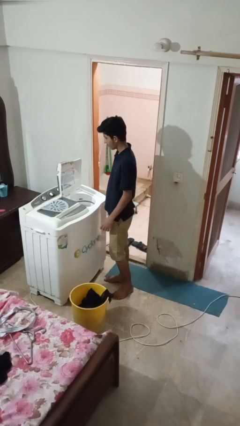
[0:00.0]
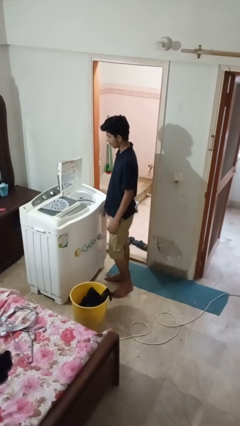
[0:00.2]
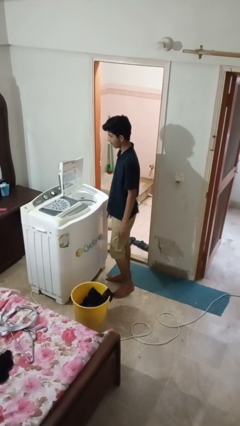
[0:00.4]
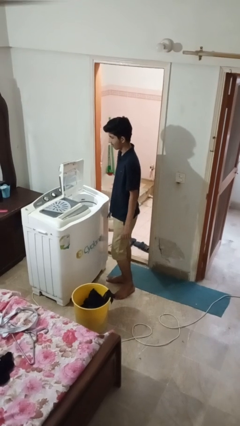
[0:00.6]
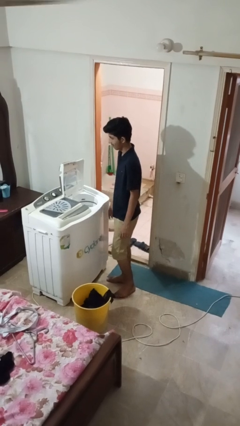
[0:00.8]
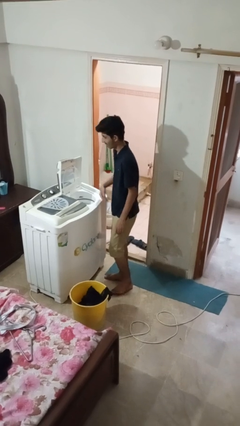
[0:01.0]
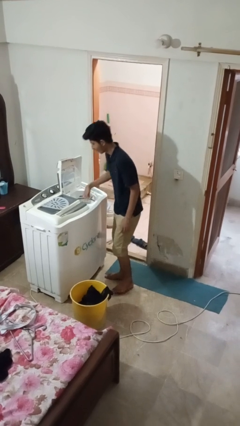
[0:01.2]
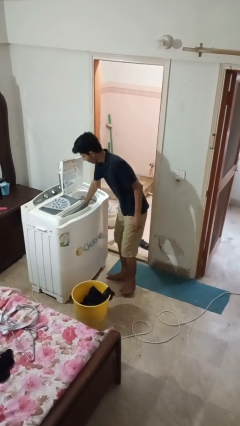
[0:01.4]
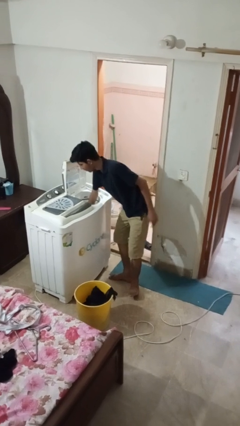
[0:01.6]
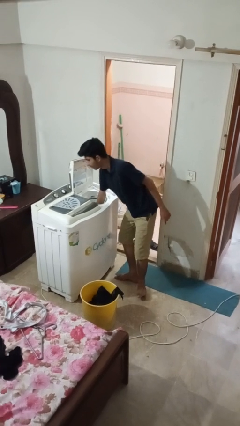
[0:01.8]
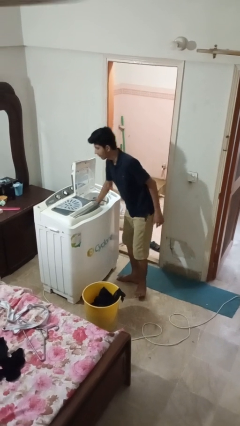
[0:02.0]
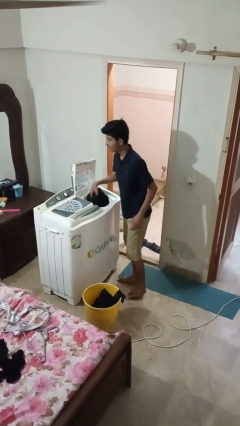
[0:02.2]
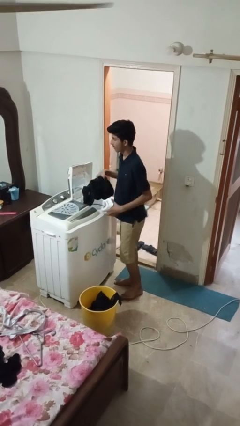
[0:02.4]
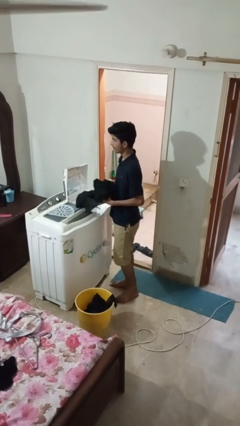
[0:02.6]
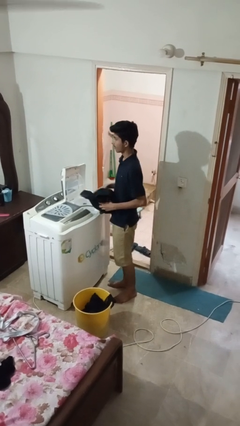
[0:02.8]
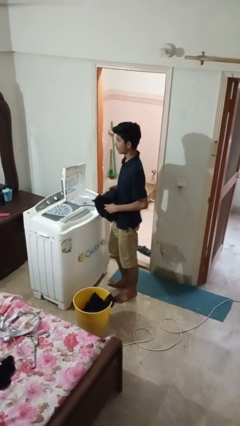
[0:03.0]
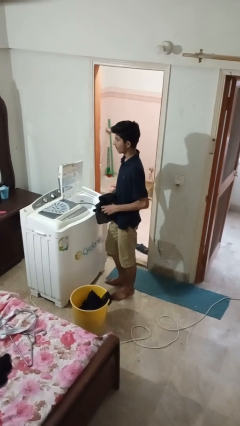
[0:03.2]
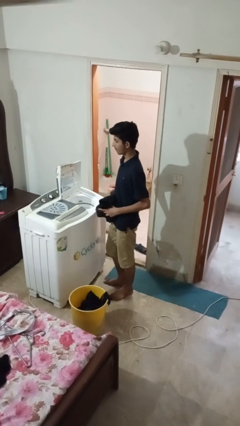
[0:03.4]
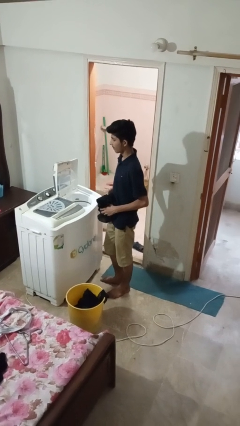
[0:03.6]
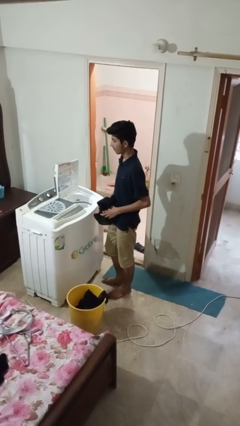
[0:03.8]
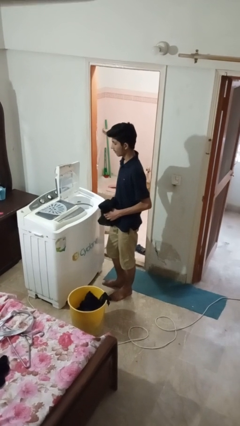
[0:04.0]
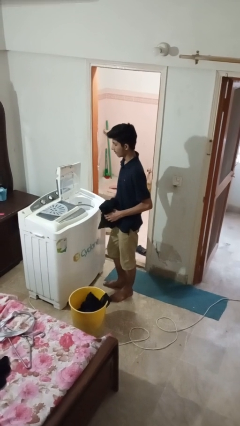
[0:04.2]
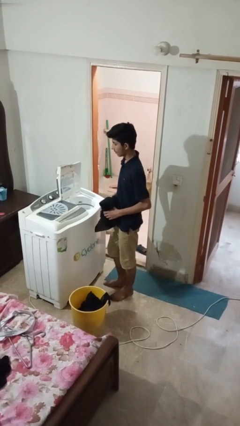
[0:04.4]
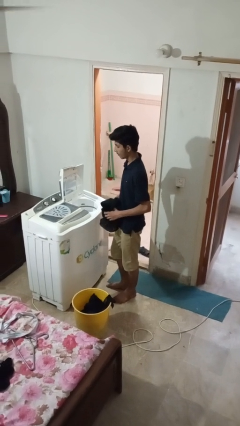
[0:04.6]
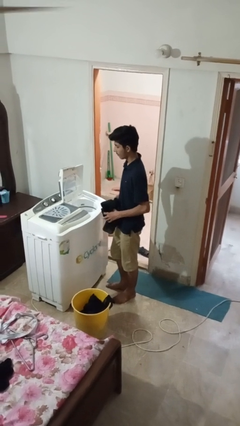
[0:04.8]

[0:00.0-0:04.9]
person unloads dryer

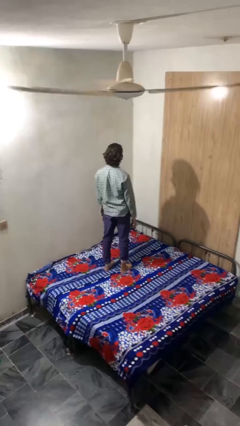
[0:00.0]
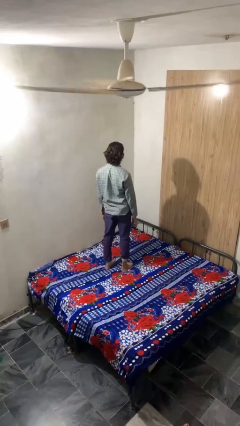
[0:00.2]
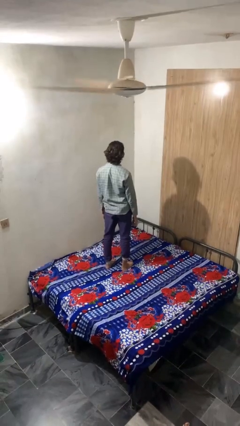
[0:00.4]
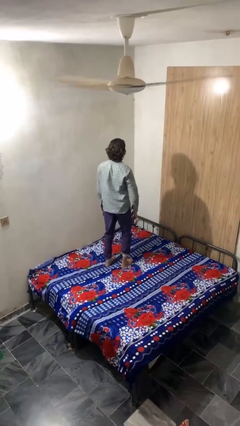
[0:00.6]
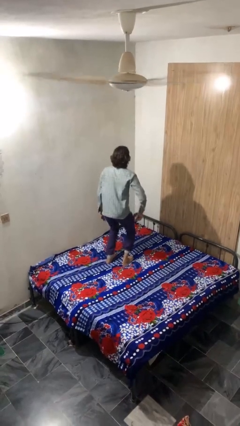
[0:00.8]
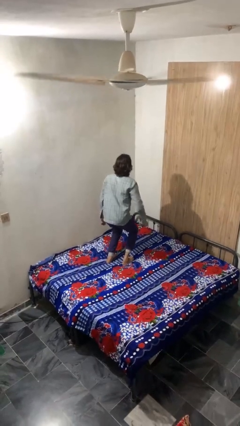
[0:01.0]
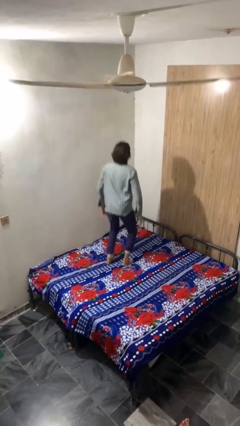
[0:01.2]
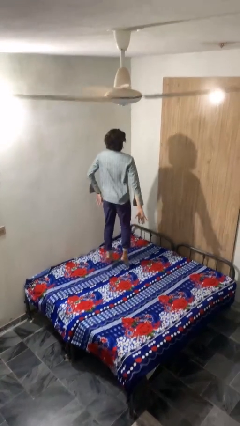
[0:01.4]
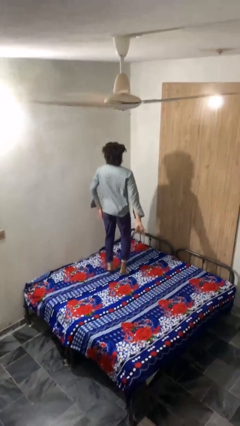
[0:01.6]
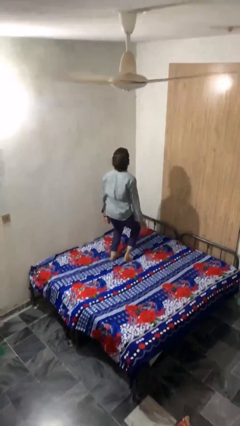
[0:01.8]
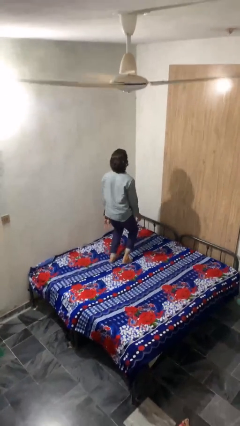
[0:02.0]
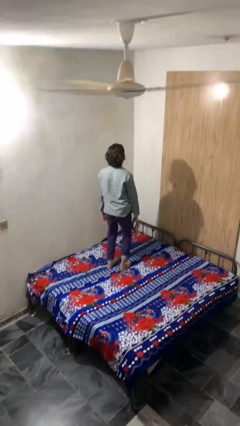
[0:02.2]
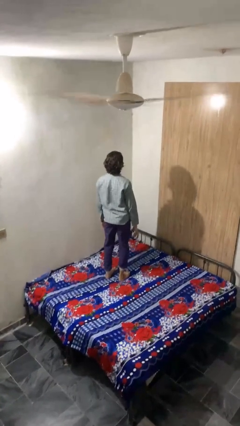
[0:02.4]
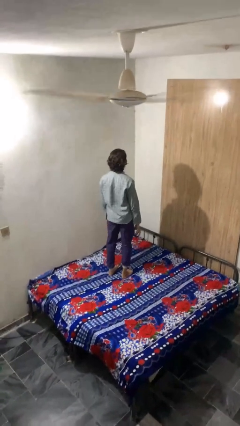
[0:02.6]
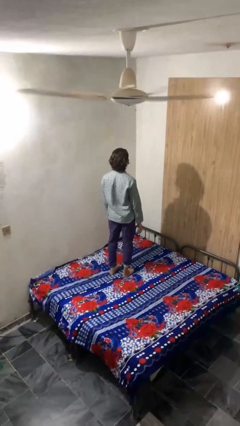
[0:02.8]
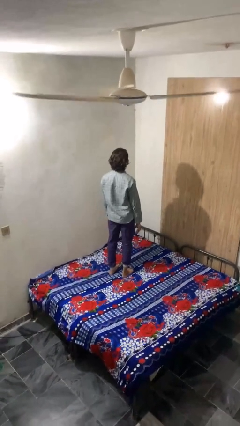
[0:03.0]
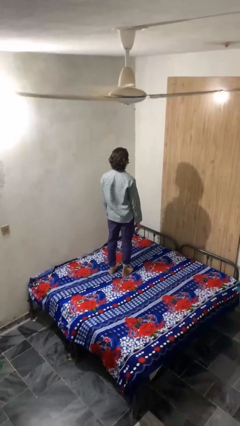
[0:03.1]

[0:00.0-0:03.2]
person jumps on bed

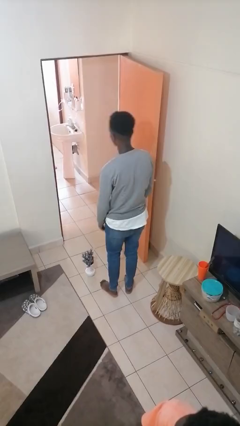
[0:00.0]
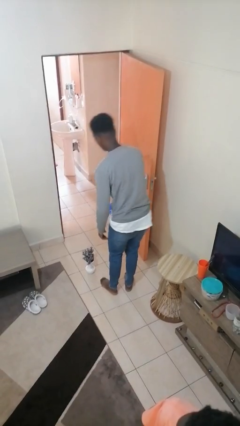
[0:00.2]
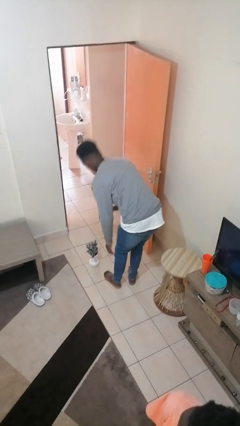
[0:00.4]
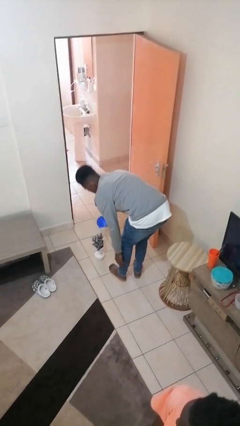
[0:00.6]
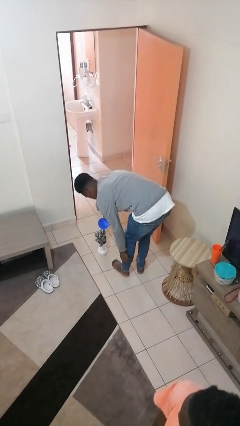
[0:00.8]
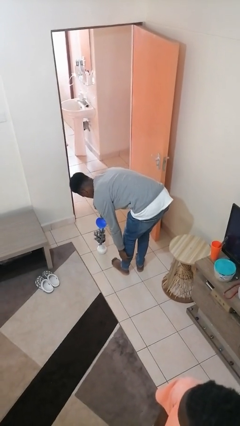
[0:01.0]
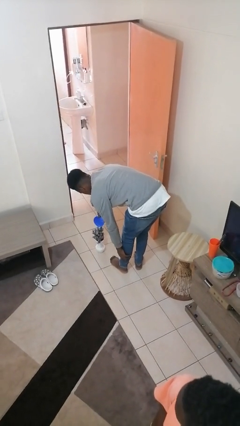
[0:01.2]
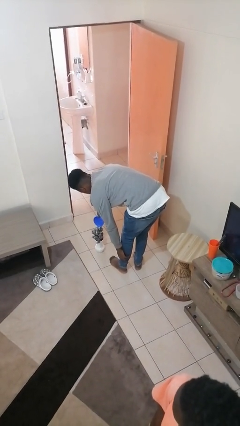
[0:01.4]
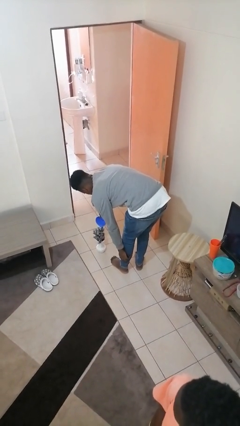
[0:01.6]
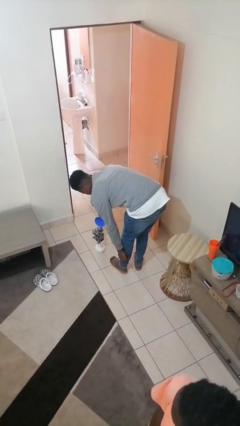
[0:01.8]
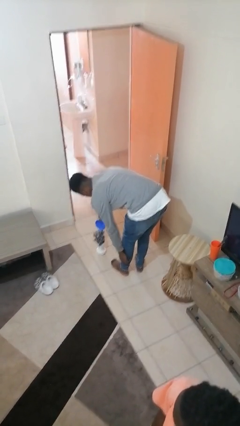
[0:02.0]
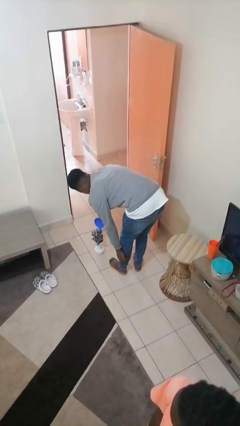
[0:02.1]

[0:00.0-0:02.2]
person waters houseplant

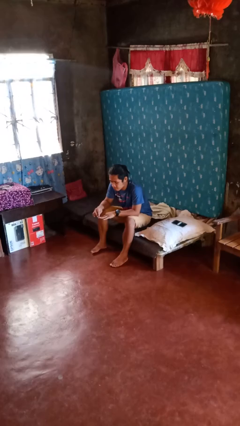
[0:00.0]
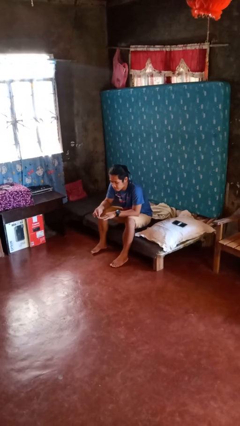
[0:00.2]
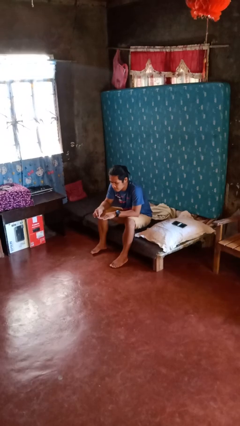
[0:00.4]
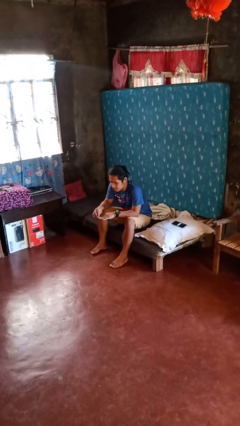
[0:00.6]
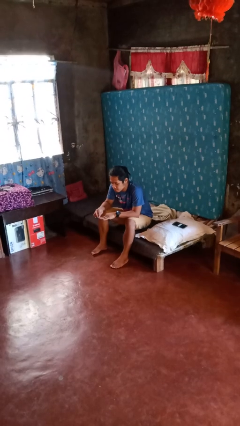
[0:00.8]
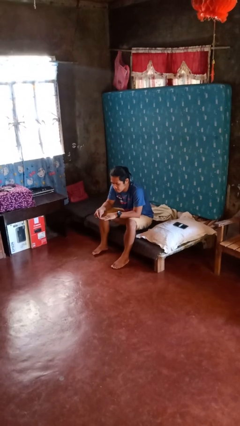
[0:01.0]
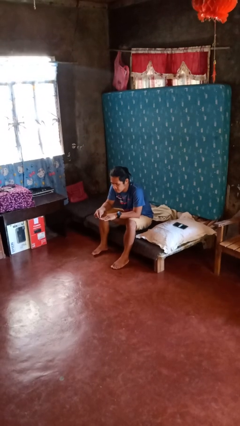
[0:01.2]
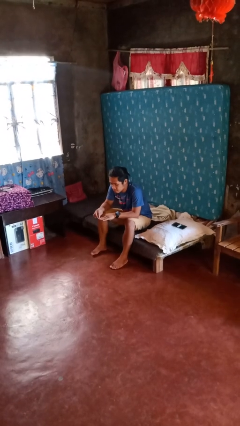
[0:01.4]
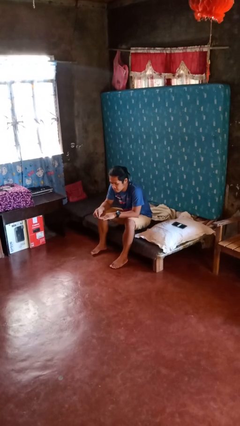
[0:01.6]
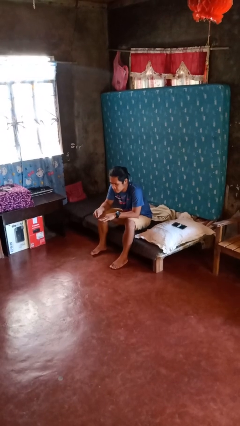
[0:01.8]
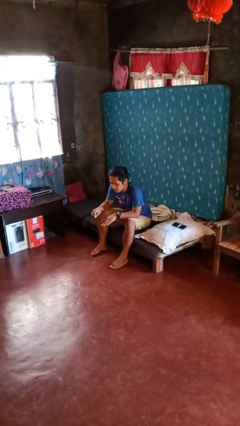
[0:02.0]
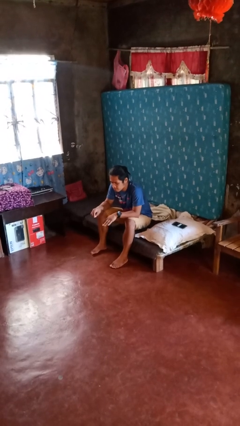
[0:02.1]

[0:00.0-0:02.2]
person files fingernails

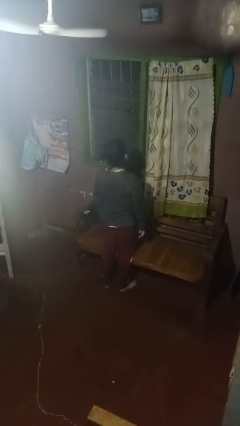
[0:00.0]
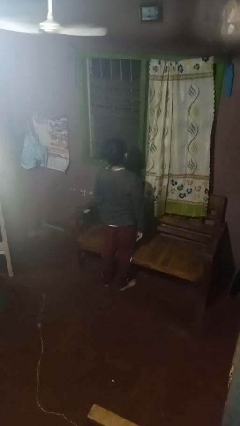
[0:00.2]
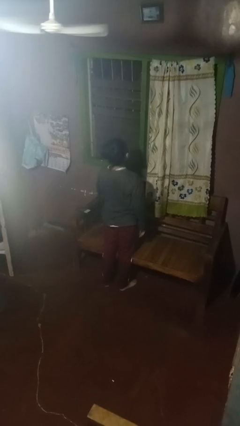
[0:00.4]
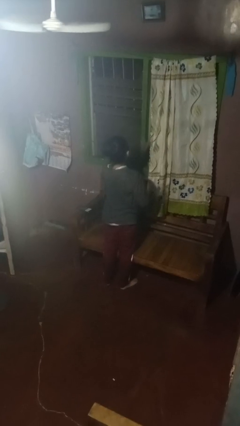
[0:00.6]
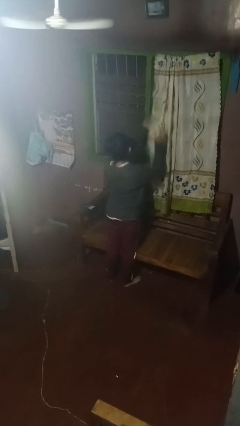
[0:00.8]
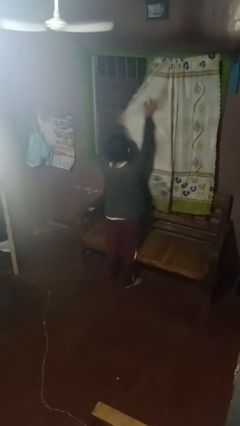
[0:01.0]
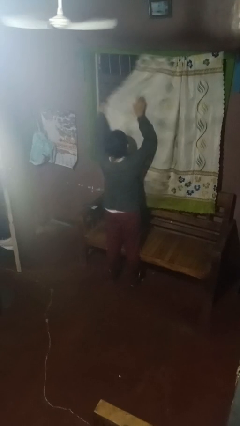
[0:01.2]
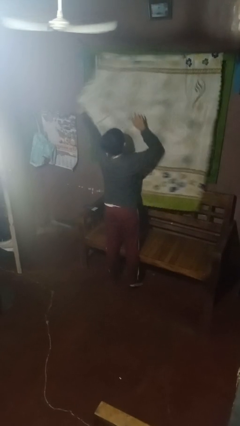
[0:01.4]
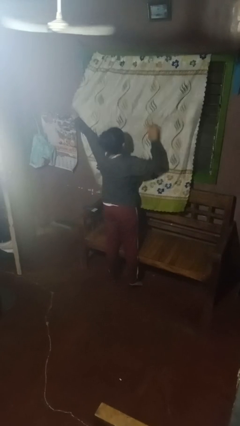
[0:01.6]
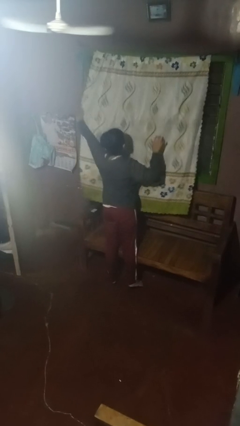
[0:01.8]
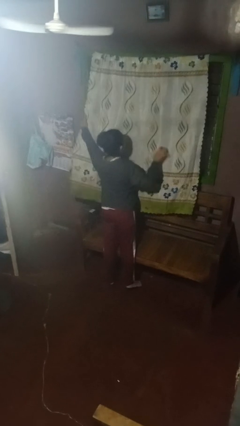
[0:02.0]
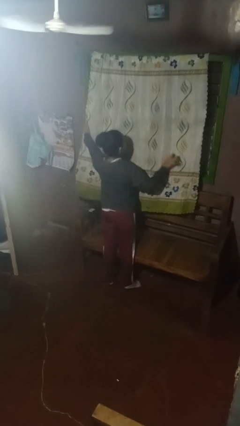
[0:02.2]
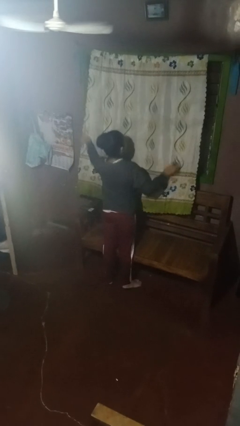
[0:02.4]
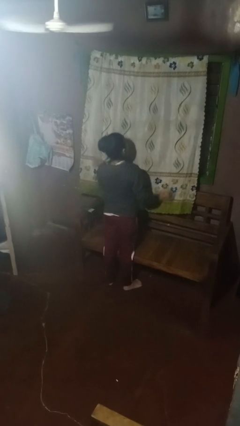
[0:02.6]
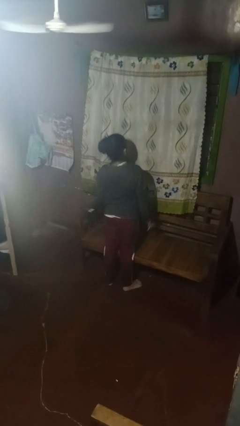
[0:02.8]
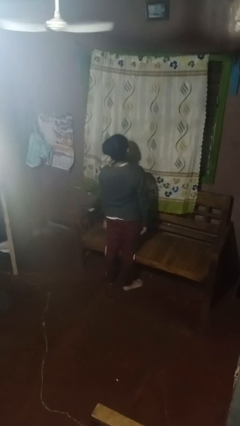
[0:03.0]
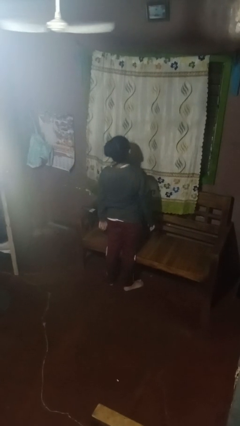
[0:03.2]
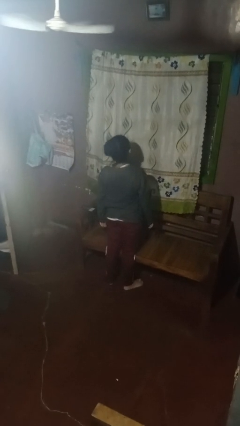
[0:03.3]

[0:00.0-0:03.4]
person closes curtains

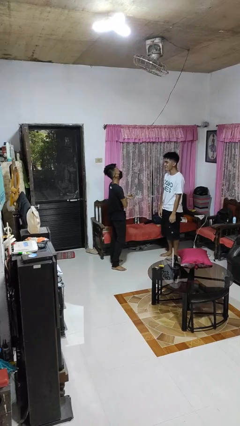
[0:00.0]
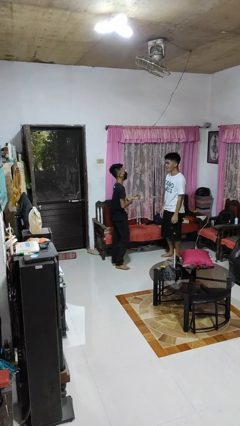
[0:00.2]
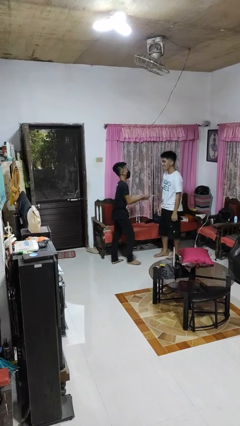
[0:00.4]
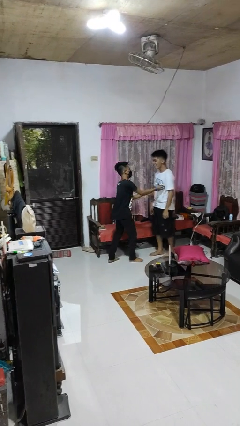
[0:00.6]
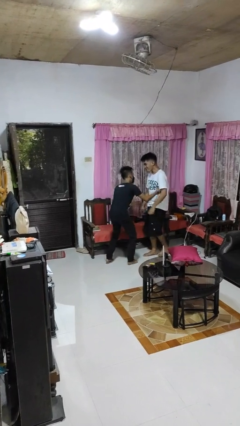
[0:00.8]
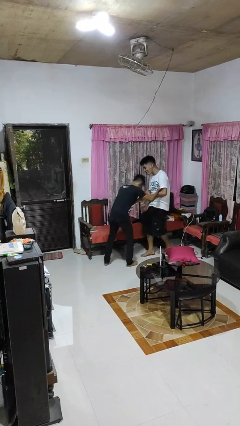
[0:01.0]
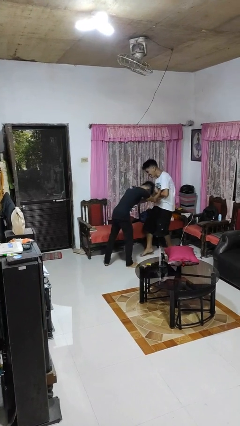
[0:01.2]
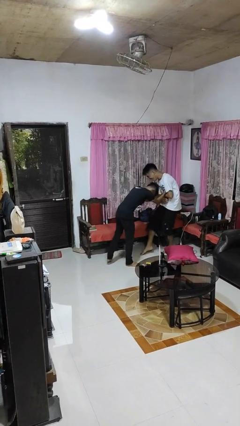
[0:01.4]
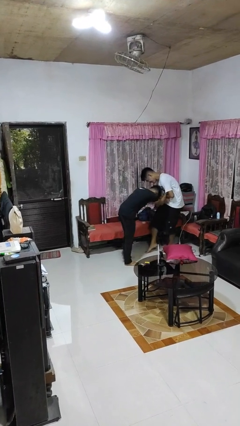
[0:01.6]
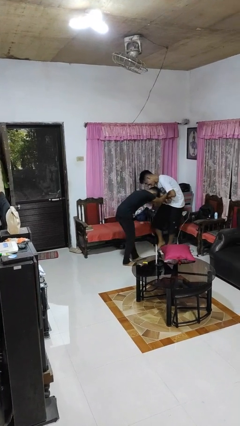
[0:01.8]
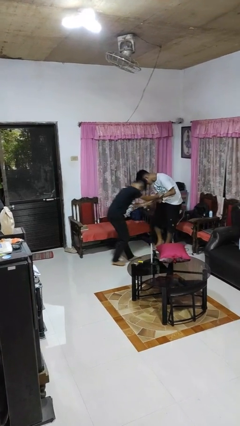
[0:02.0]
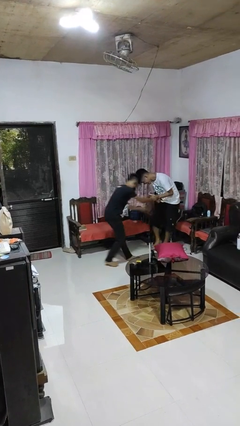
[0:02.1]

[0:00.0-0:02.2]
person tickles person
